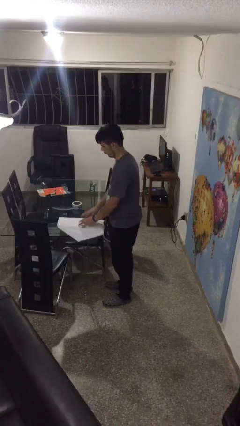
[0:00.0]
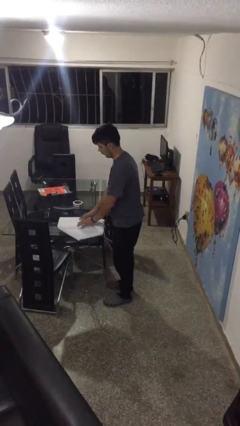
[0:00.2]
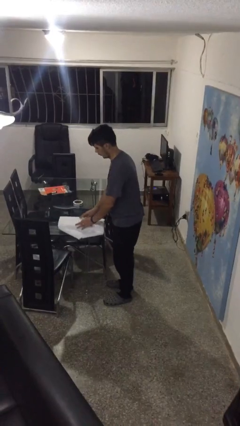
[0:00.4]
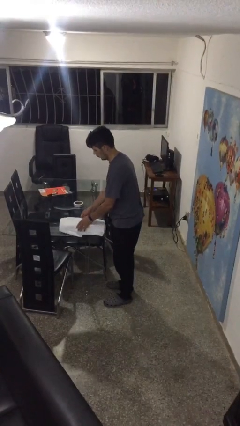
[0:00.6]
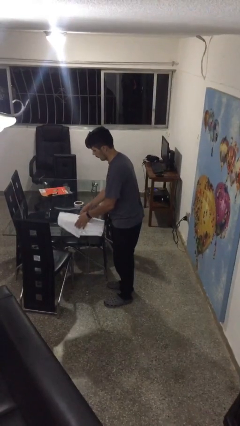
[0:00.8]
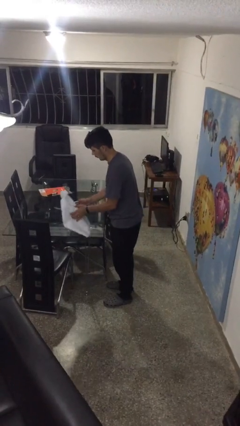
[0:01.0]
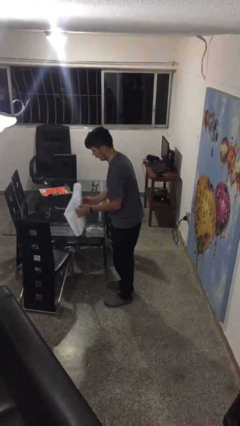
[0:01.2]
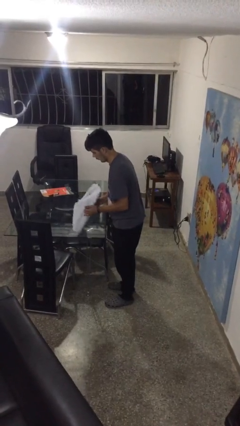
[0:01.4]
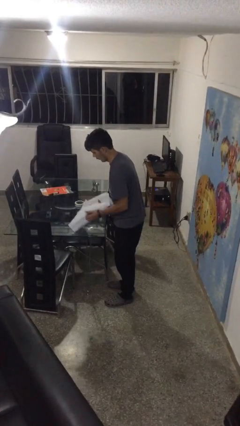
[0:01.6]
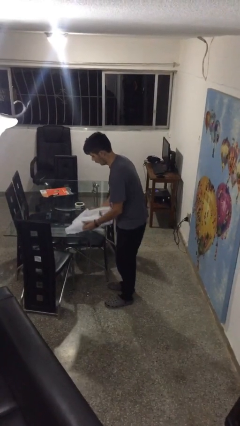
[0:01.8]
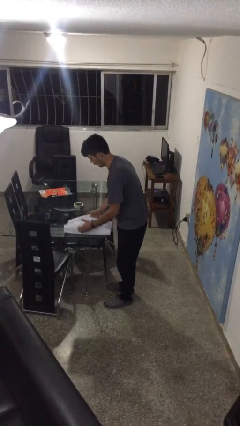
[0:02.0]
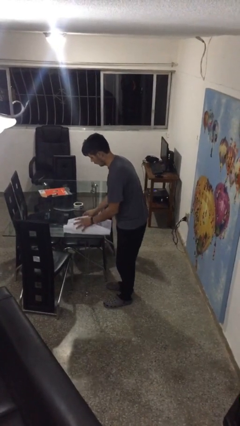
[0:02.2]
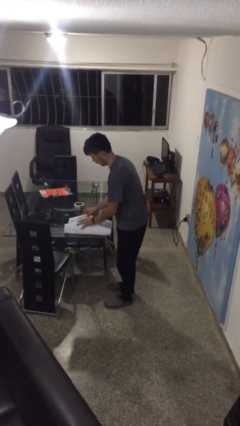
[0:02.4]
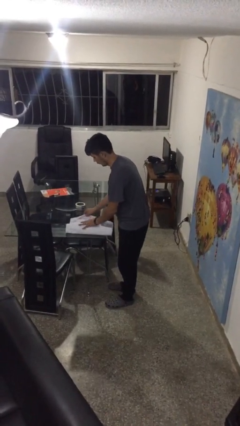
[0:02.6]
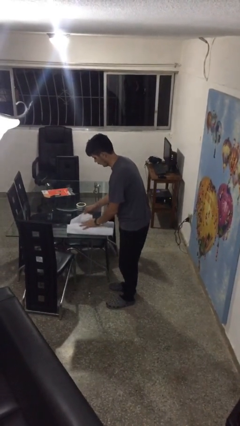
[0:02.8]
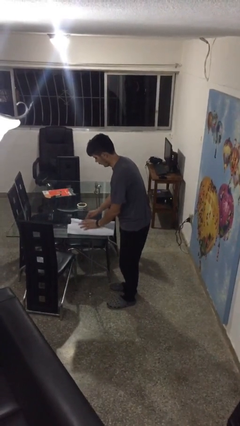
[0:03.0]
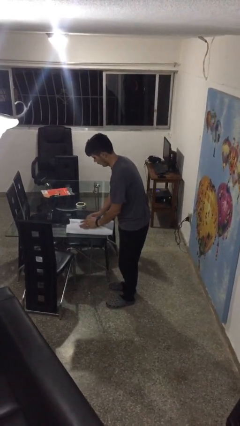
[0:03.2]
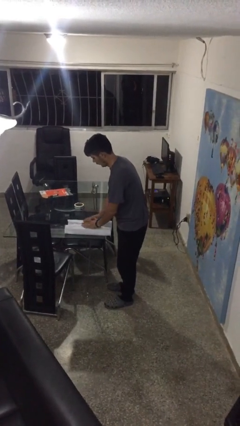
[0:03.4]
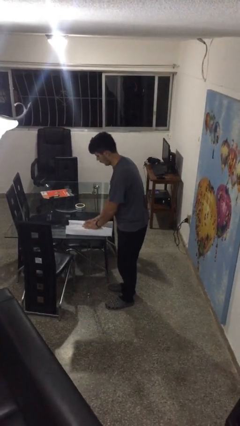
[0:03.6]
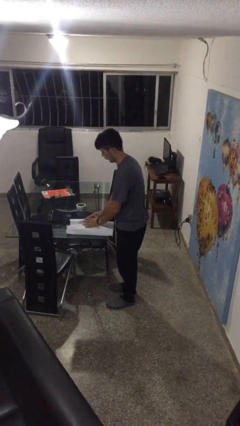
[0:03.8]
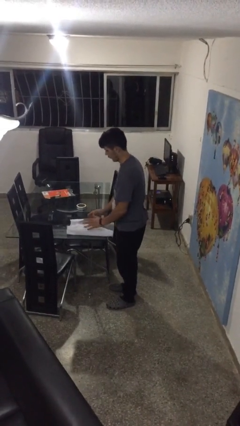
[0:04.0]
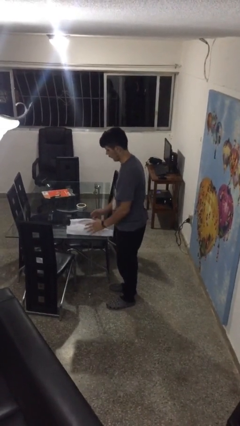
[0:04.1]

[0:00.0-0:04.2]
person wraps box

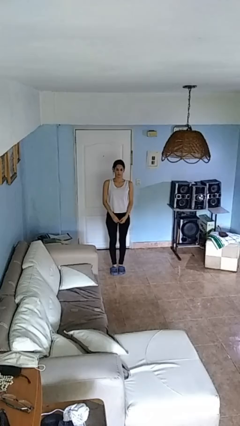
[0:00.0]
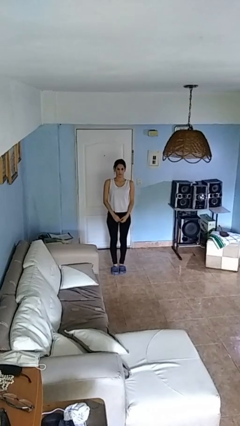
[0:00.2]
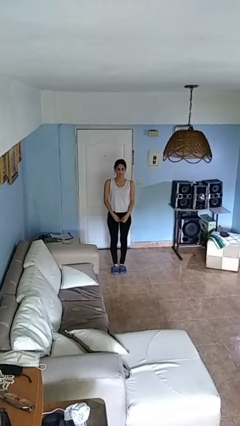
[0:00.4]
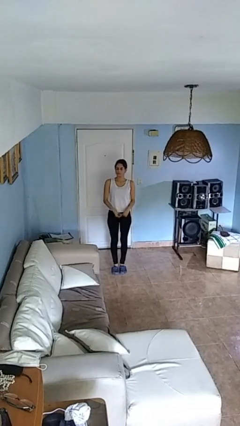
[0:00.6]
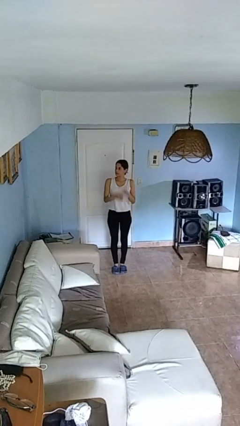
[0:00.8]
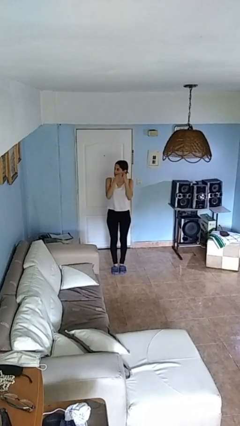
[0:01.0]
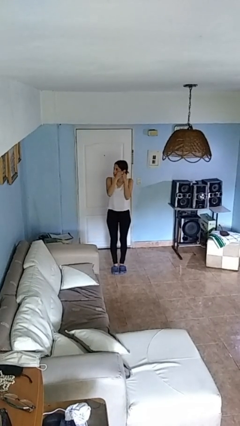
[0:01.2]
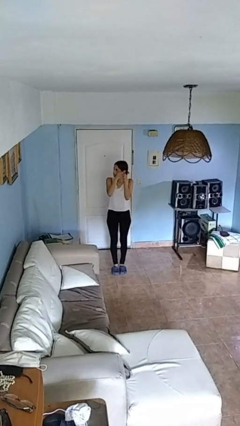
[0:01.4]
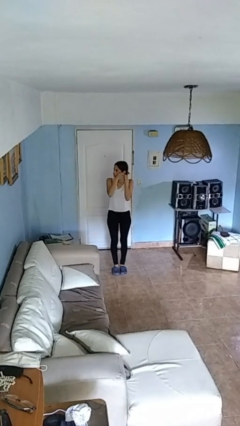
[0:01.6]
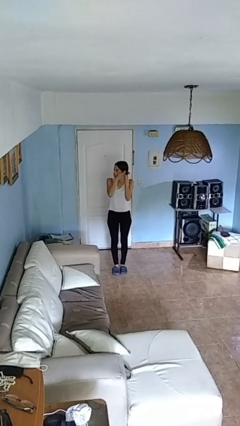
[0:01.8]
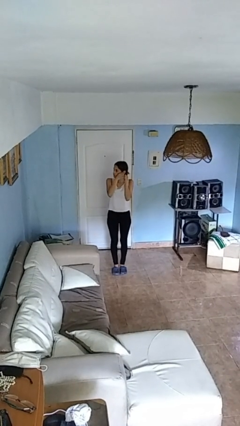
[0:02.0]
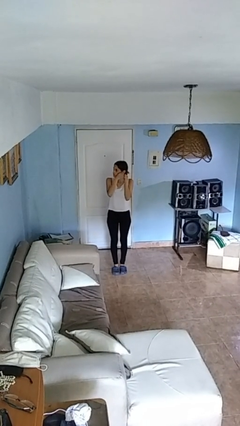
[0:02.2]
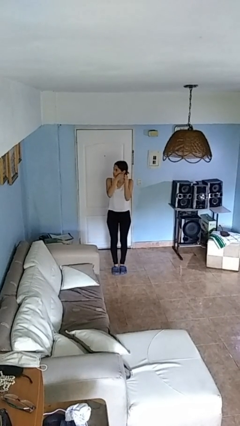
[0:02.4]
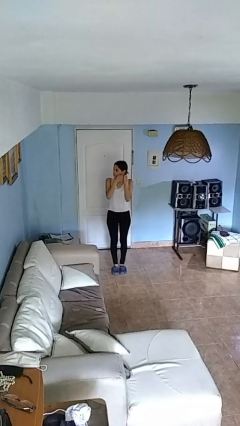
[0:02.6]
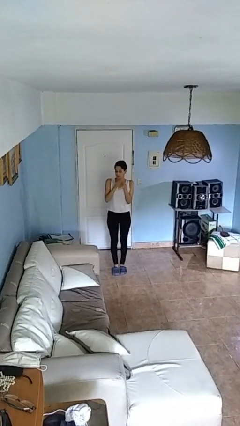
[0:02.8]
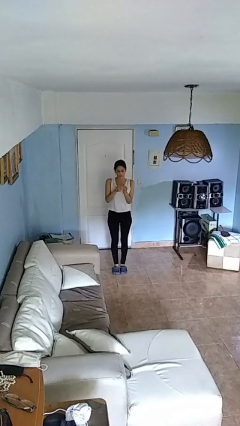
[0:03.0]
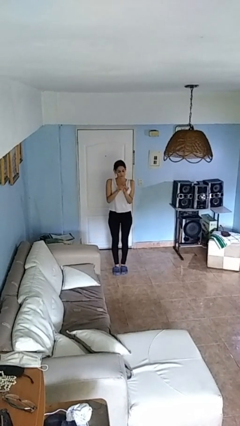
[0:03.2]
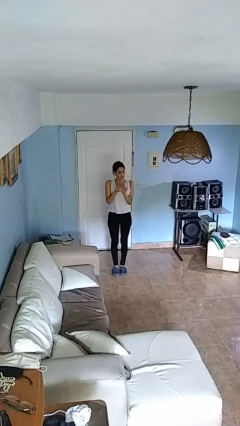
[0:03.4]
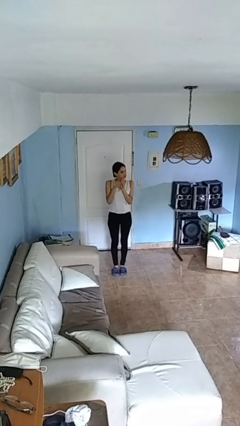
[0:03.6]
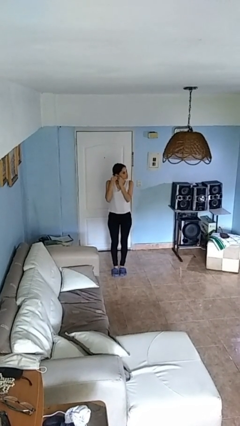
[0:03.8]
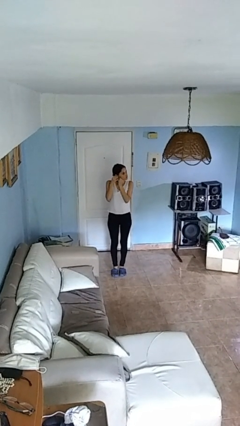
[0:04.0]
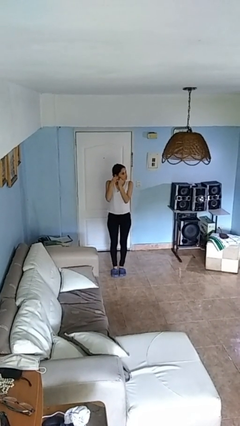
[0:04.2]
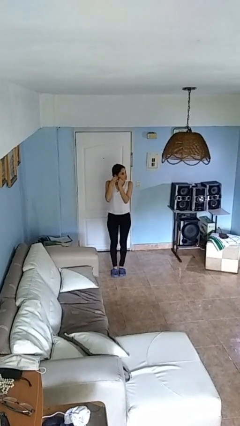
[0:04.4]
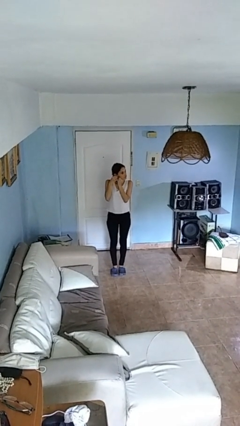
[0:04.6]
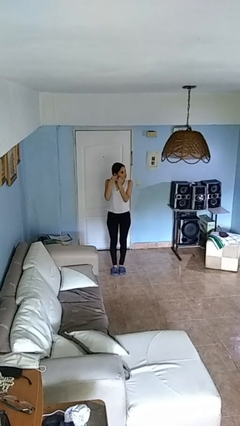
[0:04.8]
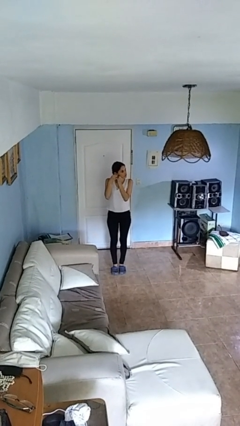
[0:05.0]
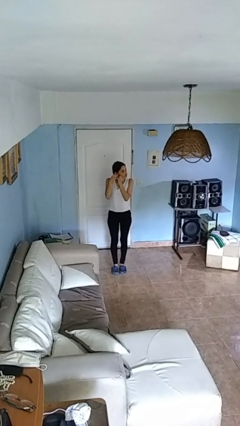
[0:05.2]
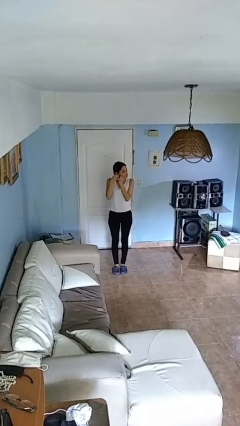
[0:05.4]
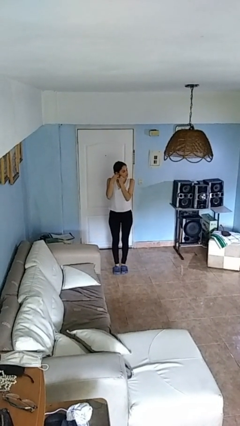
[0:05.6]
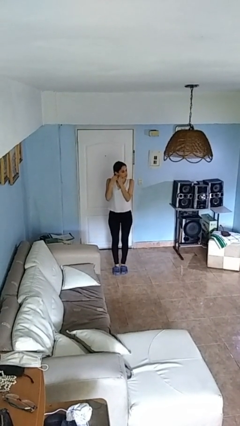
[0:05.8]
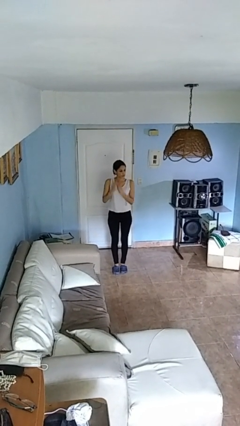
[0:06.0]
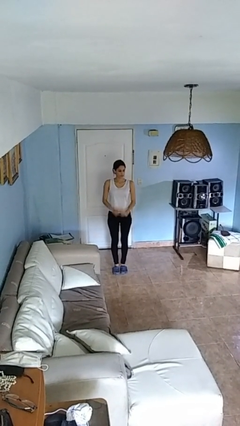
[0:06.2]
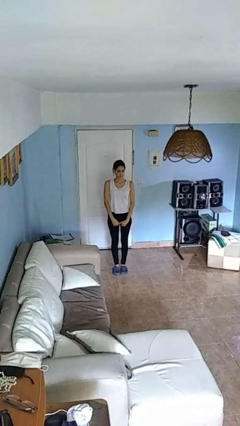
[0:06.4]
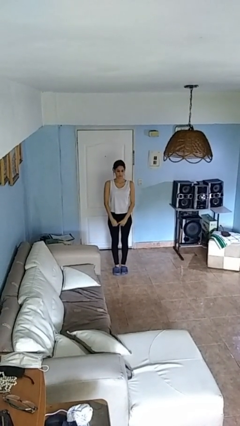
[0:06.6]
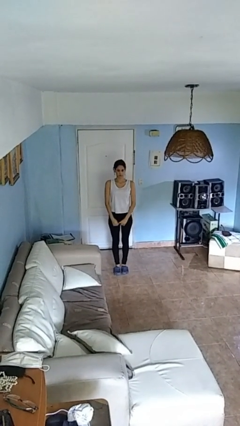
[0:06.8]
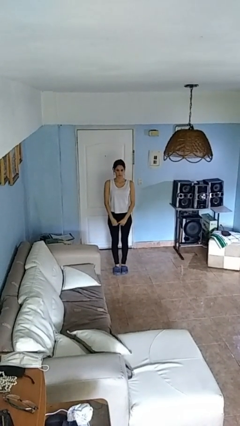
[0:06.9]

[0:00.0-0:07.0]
person puts on necklace

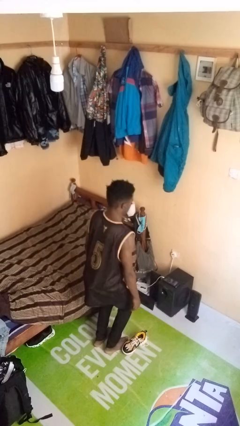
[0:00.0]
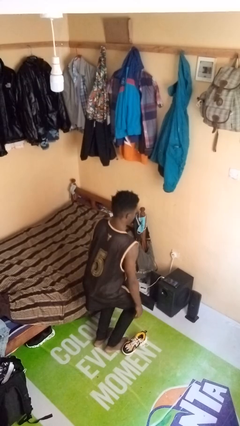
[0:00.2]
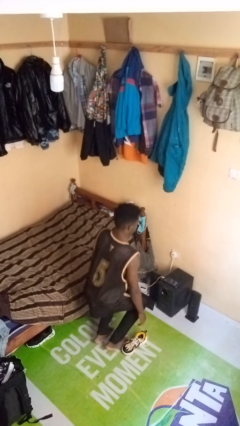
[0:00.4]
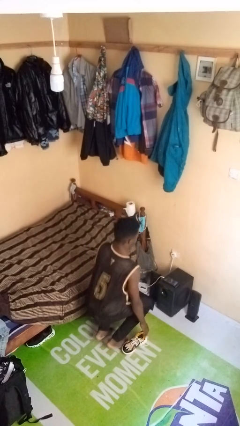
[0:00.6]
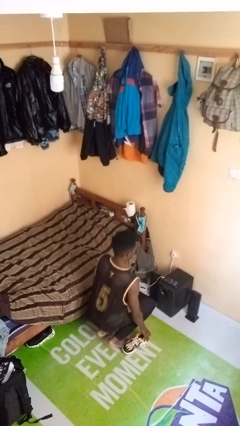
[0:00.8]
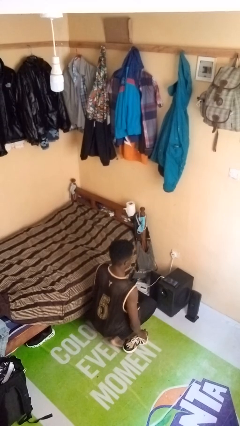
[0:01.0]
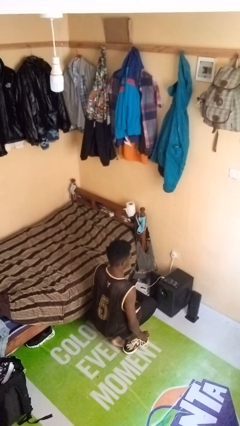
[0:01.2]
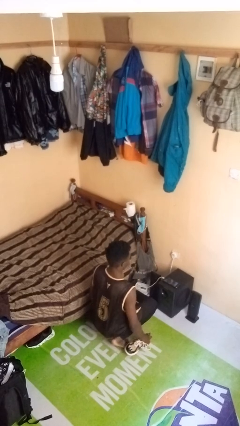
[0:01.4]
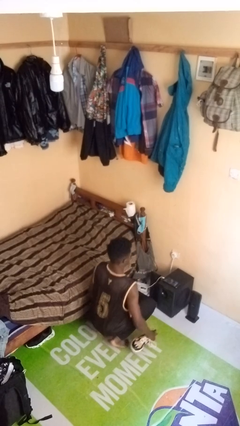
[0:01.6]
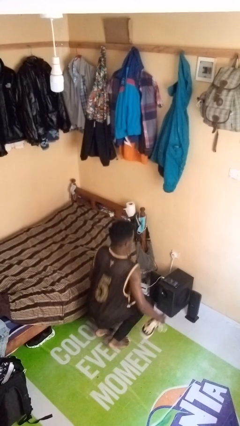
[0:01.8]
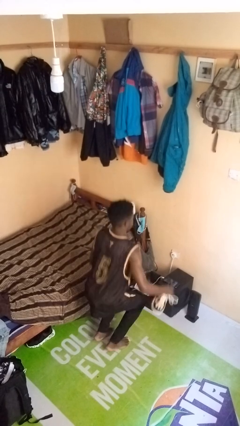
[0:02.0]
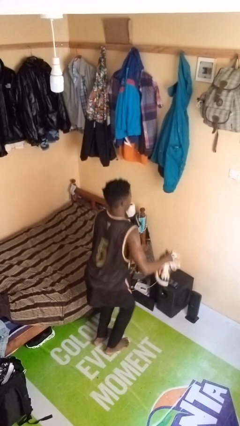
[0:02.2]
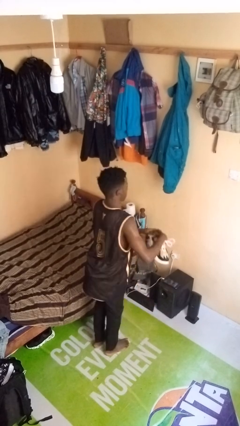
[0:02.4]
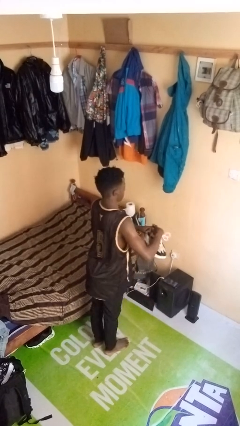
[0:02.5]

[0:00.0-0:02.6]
person picks up object from floor

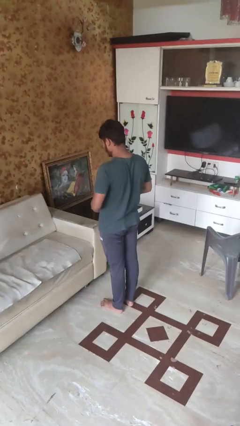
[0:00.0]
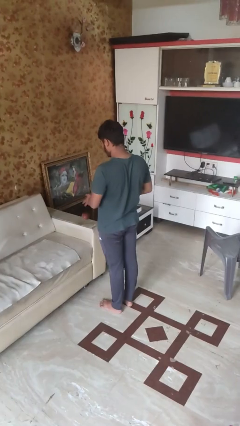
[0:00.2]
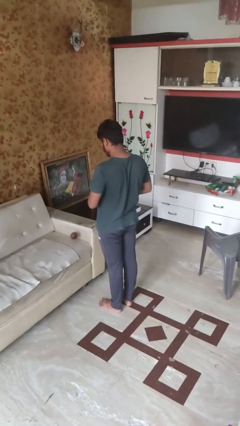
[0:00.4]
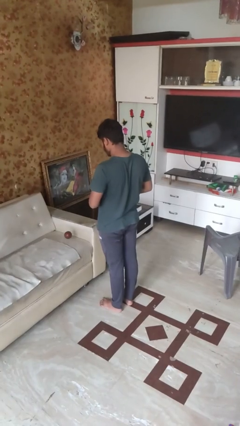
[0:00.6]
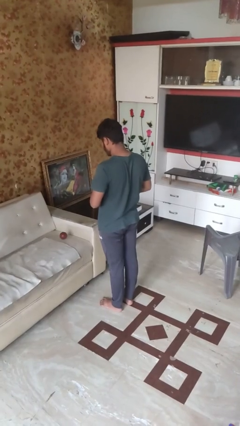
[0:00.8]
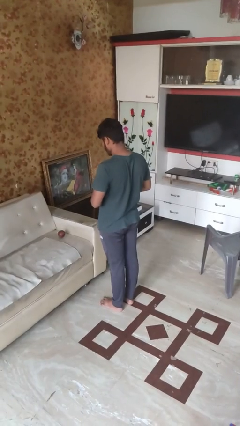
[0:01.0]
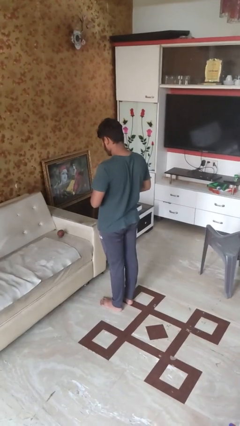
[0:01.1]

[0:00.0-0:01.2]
person throws object on bed

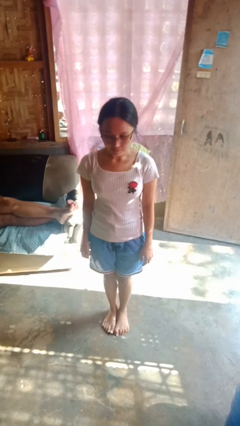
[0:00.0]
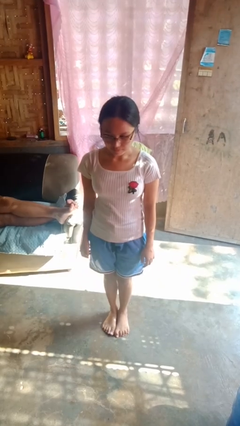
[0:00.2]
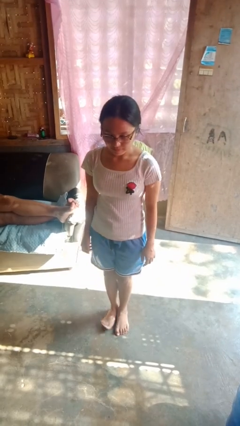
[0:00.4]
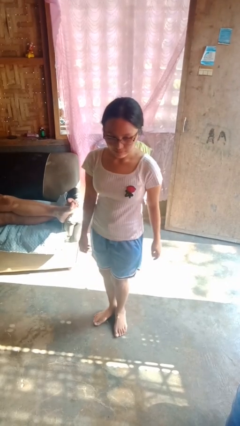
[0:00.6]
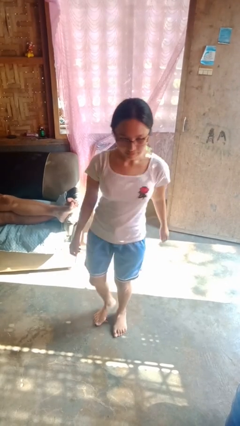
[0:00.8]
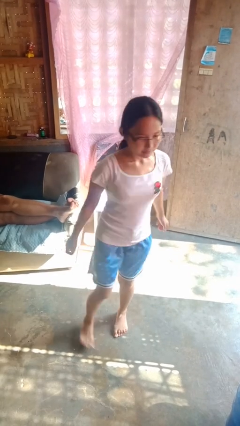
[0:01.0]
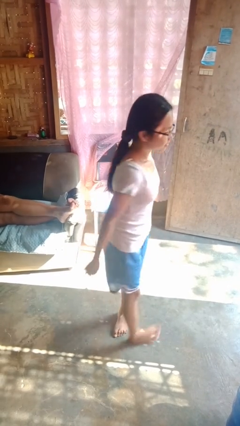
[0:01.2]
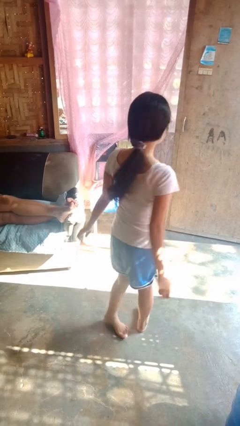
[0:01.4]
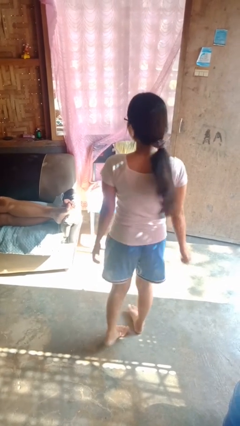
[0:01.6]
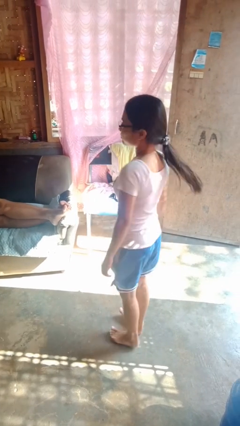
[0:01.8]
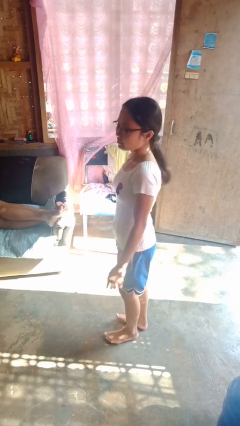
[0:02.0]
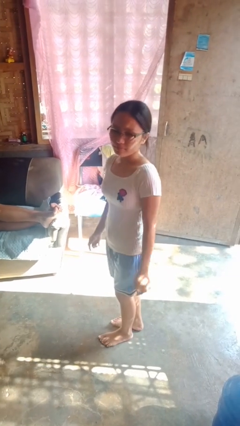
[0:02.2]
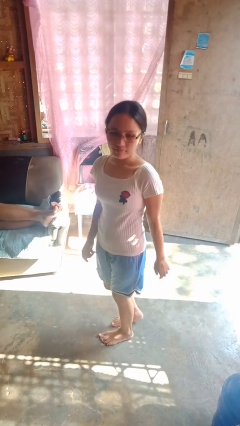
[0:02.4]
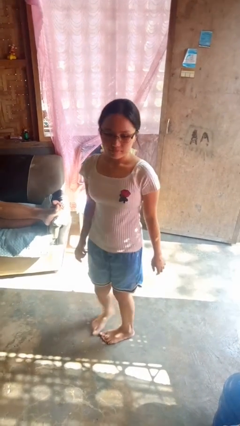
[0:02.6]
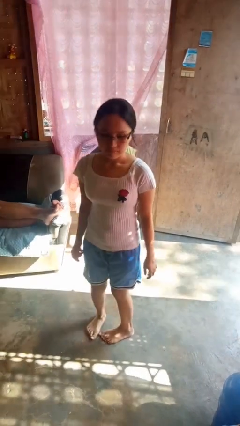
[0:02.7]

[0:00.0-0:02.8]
person twirls
